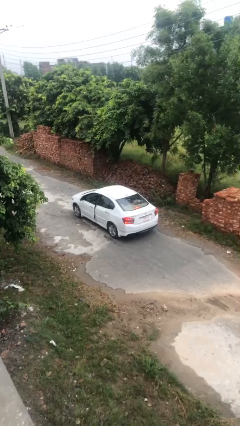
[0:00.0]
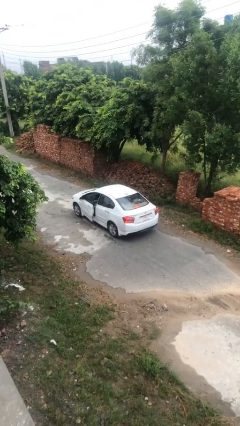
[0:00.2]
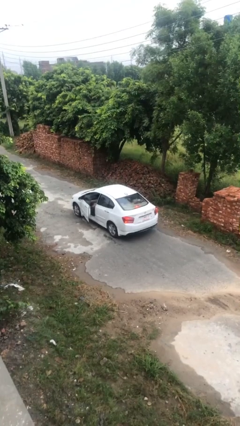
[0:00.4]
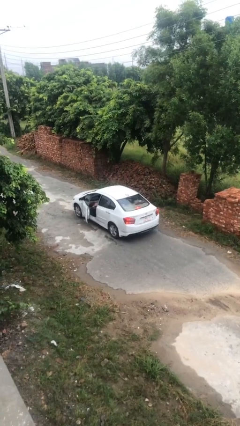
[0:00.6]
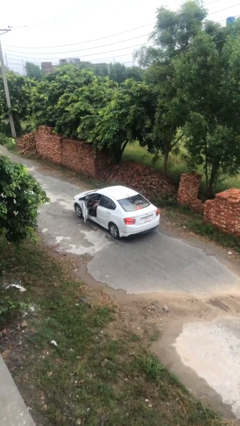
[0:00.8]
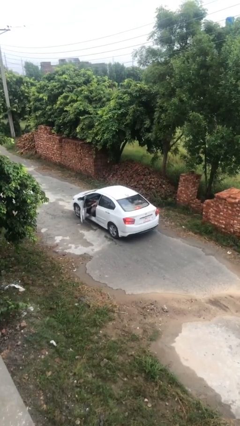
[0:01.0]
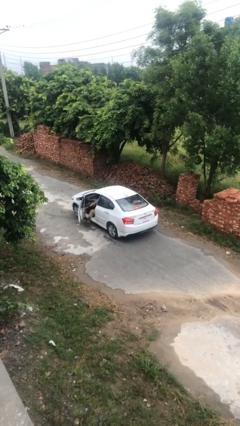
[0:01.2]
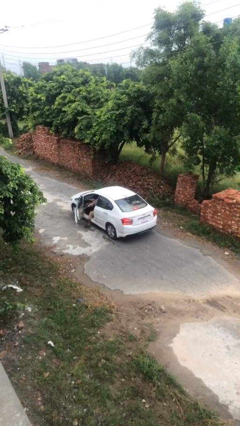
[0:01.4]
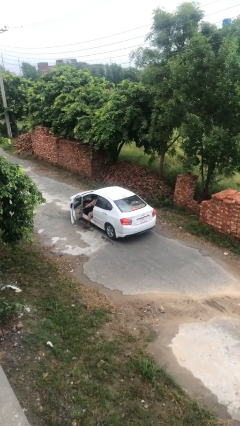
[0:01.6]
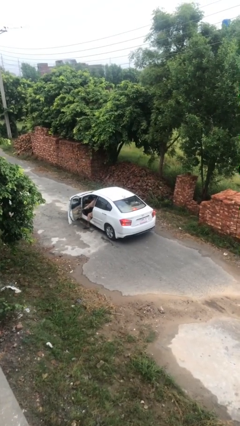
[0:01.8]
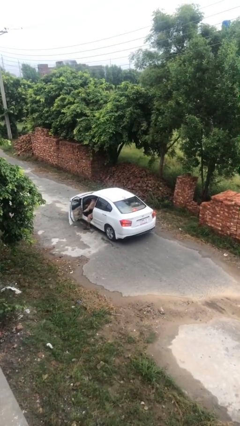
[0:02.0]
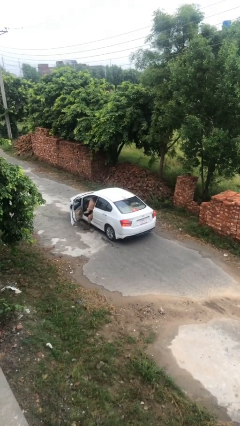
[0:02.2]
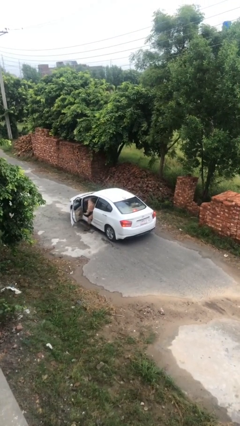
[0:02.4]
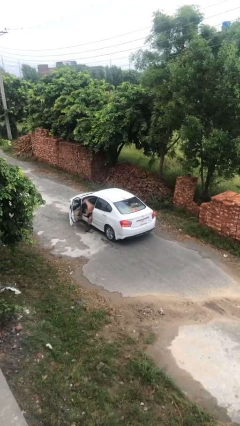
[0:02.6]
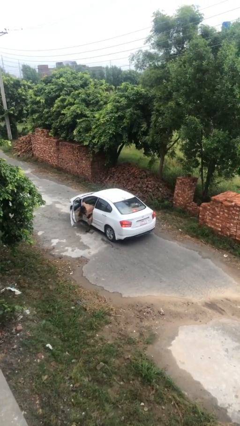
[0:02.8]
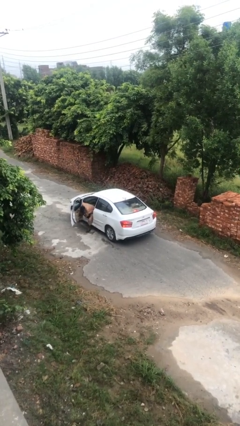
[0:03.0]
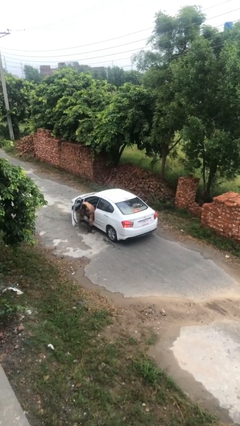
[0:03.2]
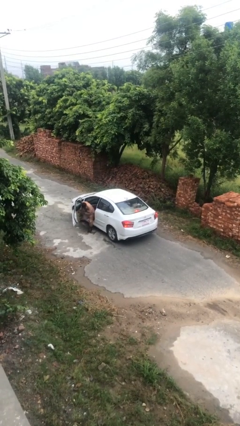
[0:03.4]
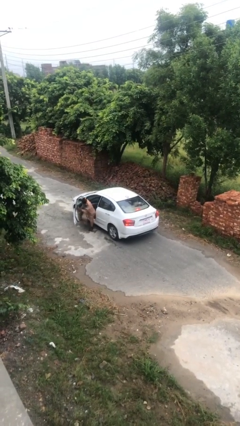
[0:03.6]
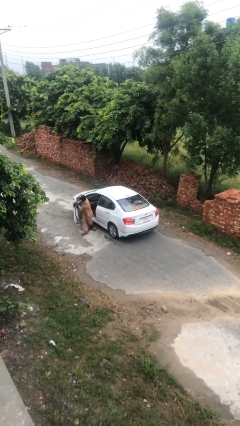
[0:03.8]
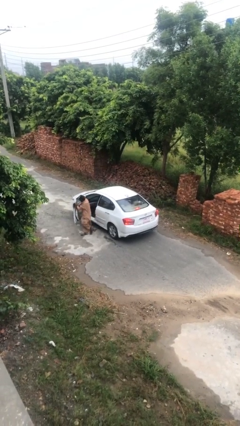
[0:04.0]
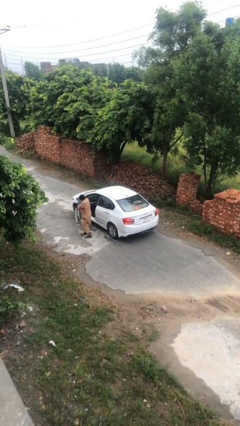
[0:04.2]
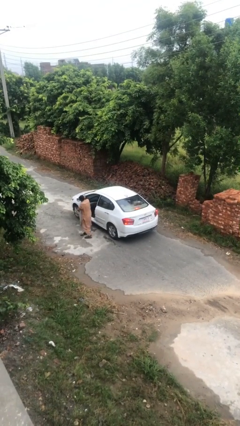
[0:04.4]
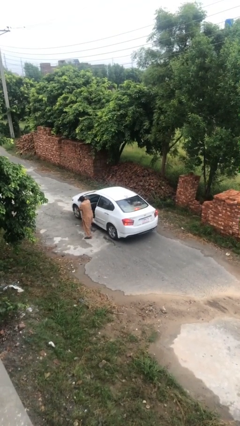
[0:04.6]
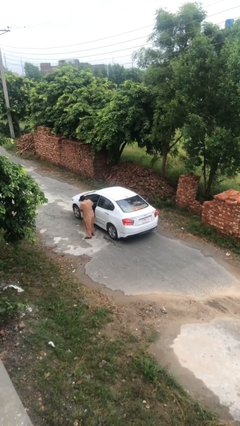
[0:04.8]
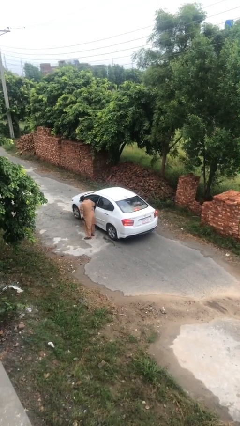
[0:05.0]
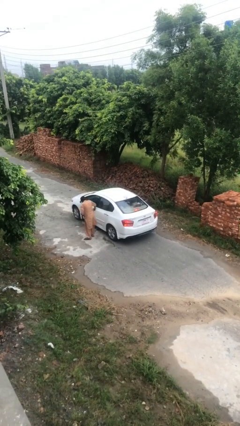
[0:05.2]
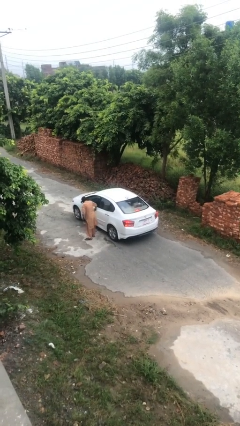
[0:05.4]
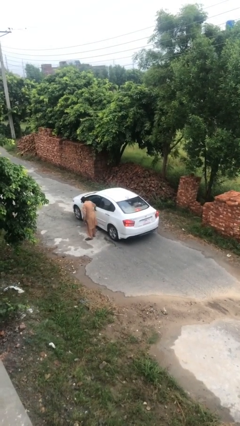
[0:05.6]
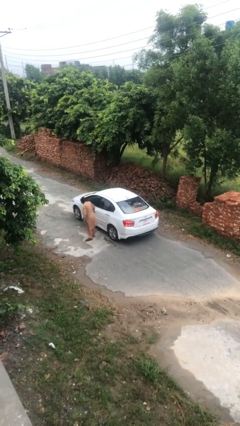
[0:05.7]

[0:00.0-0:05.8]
car drops off person

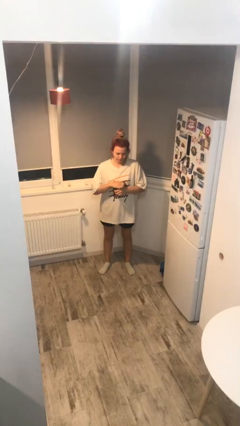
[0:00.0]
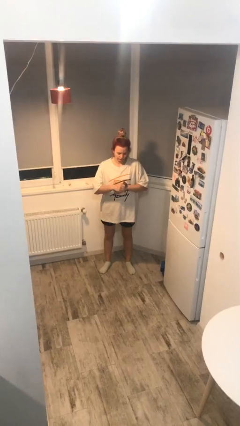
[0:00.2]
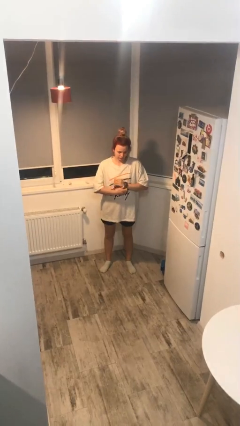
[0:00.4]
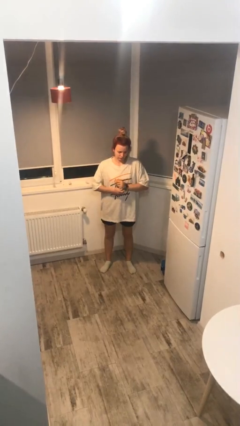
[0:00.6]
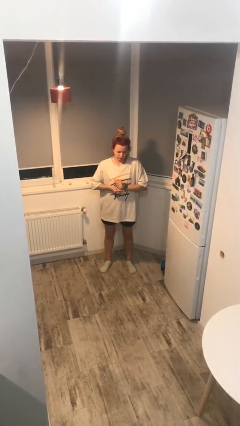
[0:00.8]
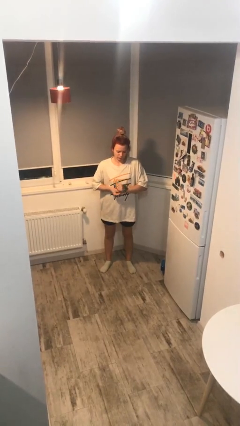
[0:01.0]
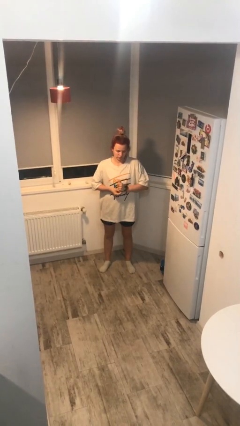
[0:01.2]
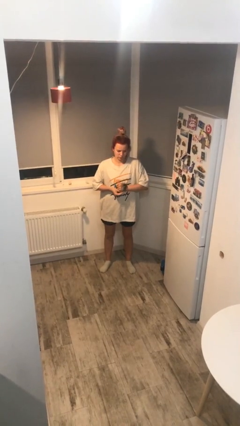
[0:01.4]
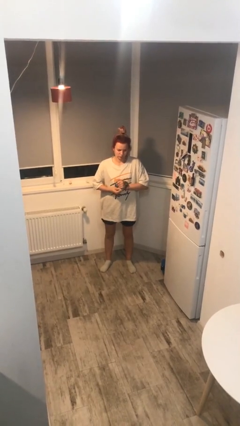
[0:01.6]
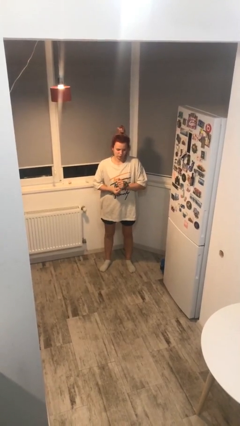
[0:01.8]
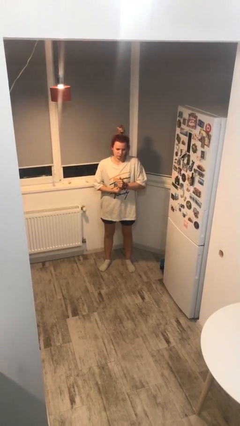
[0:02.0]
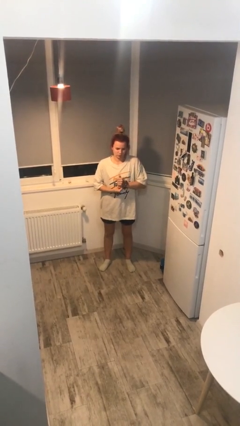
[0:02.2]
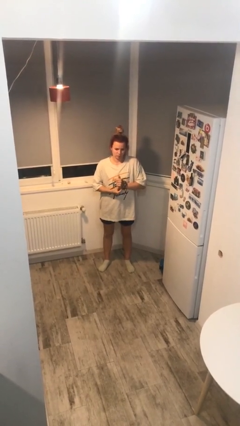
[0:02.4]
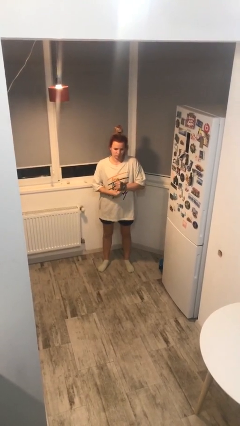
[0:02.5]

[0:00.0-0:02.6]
person puts on wristwatch

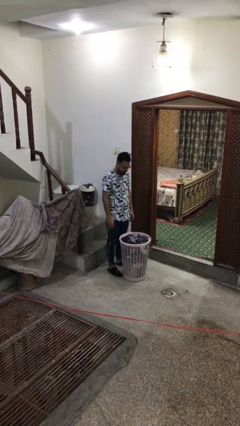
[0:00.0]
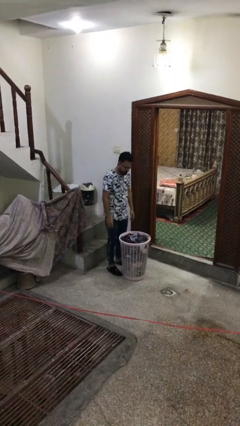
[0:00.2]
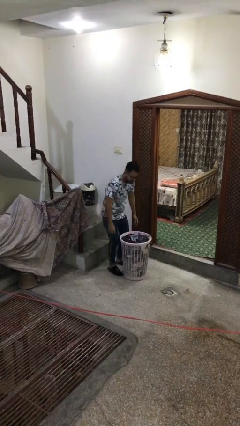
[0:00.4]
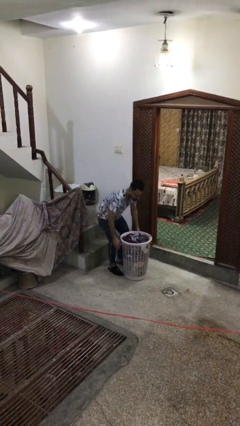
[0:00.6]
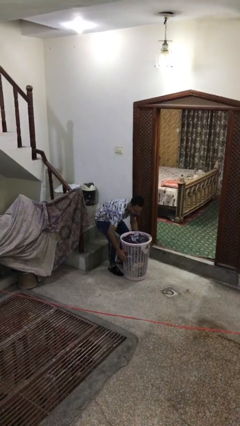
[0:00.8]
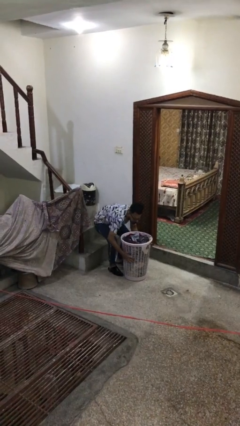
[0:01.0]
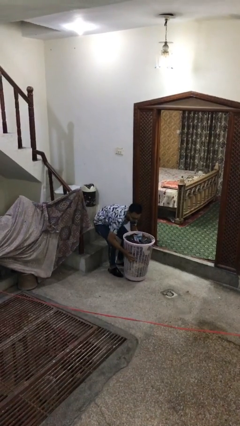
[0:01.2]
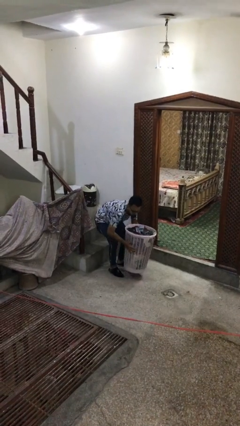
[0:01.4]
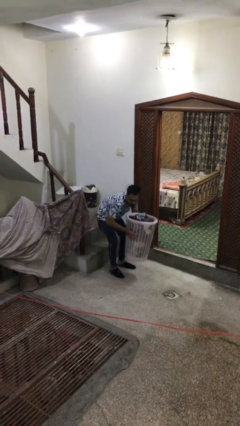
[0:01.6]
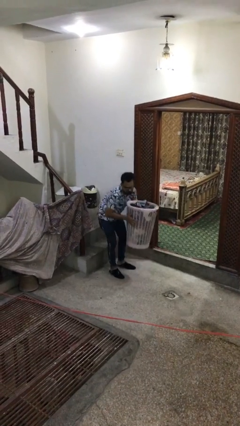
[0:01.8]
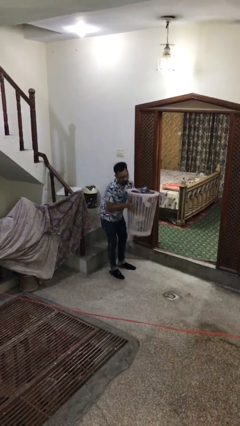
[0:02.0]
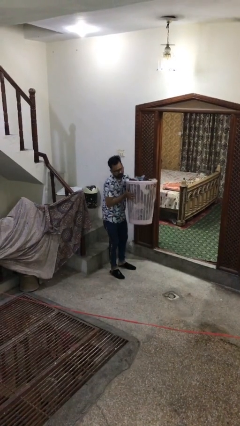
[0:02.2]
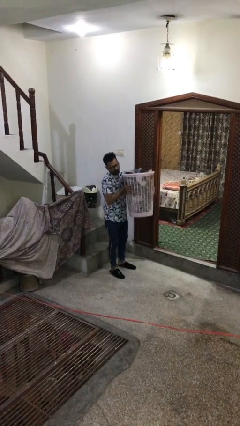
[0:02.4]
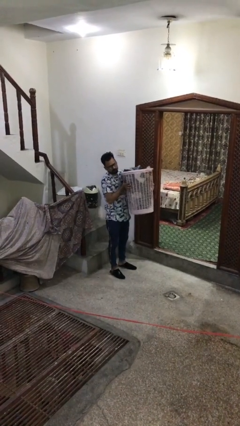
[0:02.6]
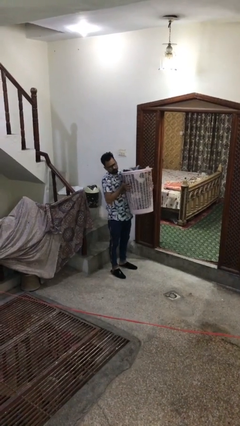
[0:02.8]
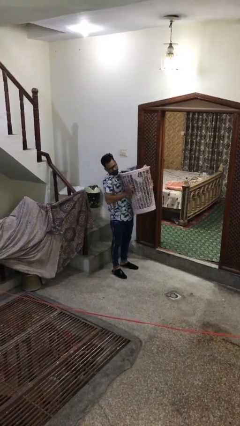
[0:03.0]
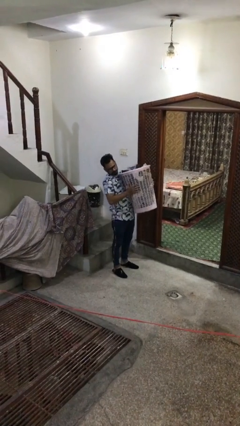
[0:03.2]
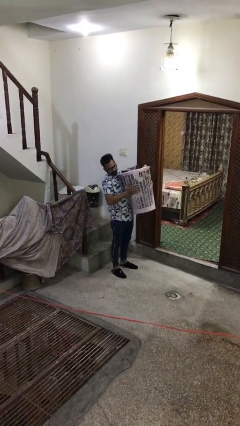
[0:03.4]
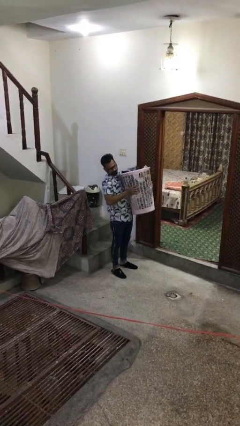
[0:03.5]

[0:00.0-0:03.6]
person picks up object from floor

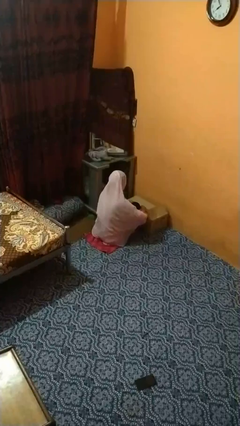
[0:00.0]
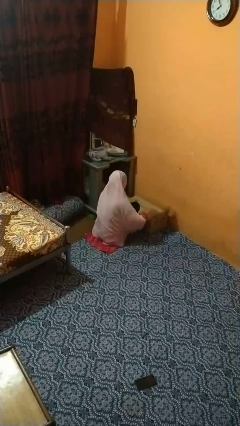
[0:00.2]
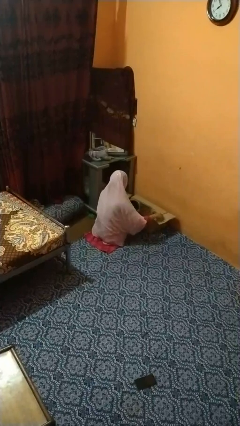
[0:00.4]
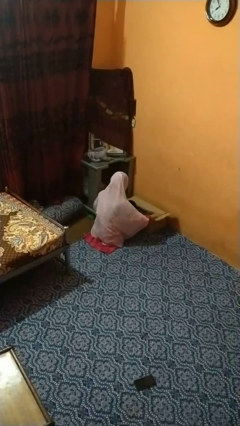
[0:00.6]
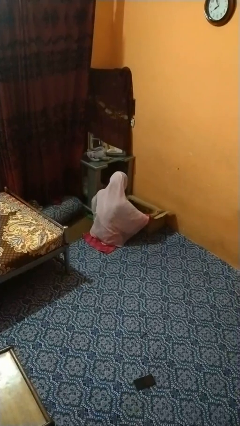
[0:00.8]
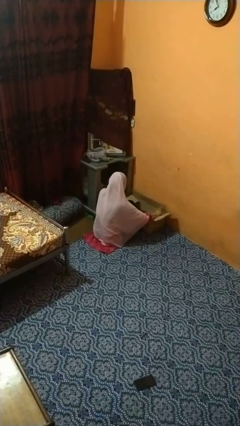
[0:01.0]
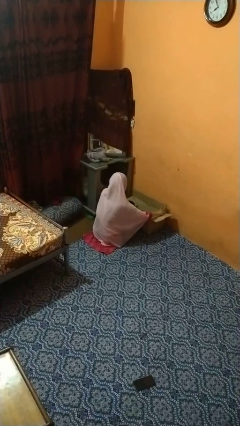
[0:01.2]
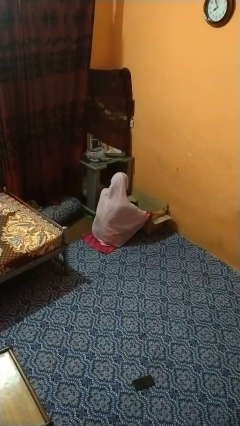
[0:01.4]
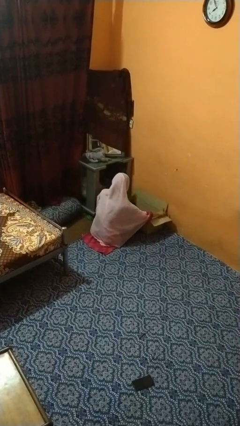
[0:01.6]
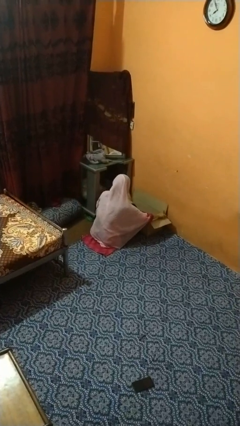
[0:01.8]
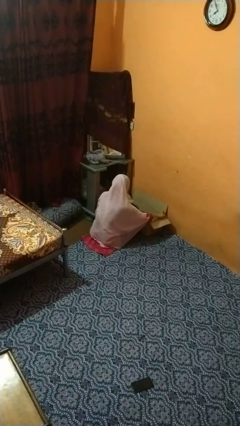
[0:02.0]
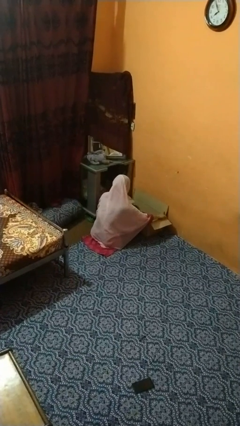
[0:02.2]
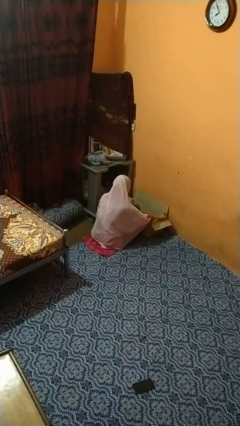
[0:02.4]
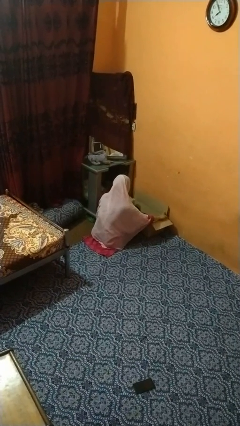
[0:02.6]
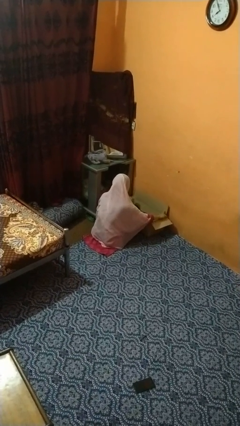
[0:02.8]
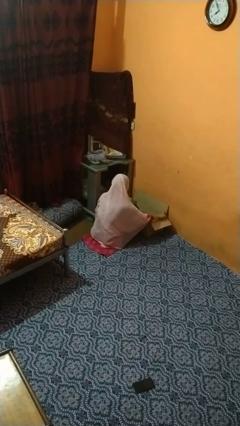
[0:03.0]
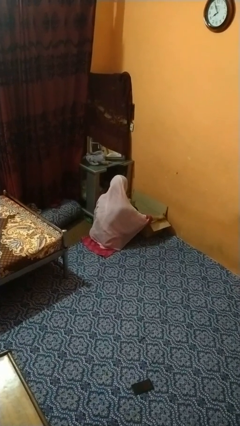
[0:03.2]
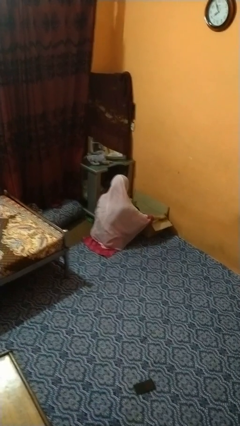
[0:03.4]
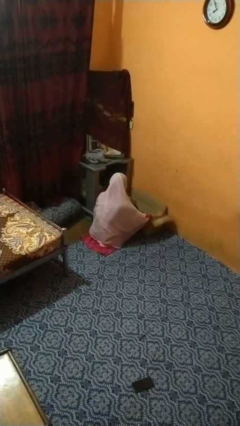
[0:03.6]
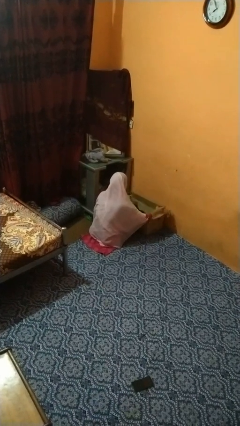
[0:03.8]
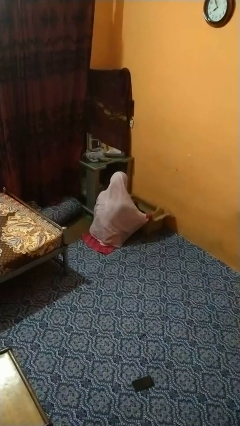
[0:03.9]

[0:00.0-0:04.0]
person opens box

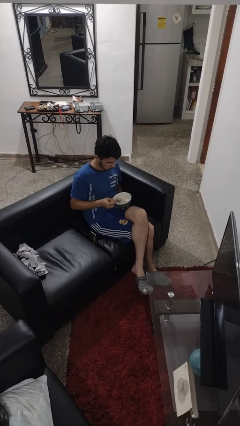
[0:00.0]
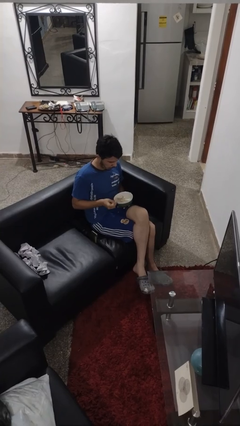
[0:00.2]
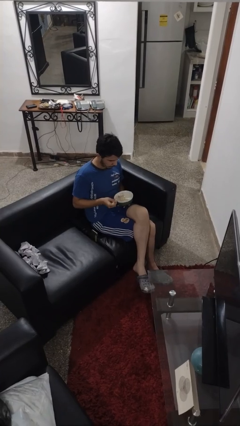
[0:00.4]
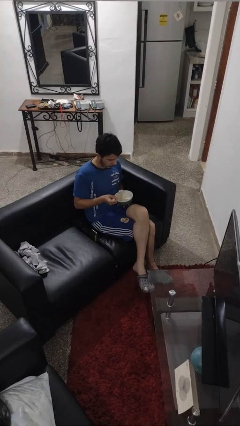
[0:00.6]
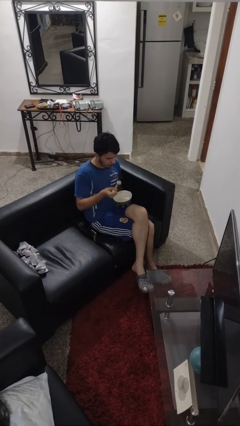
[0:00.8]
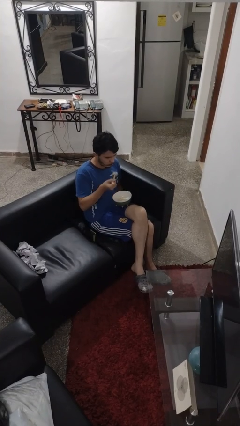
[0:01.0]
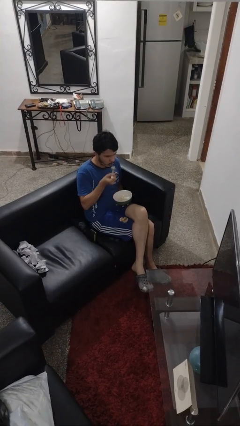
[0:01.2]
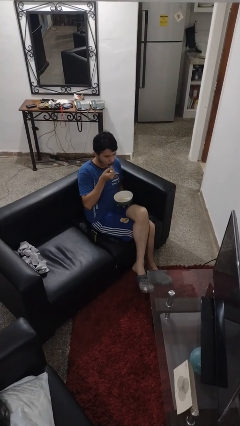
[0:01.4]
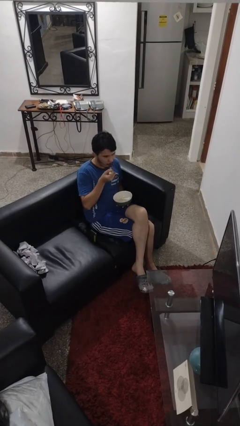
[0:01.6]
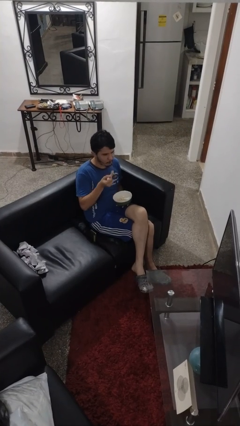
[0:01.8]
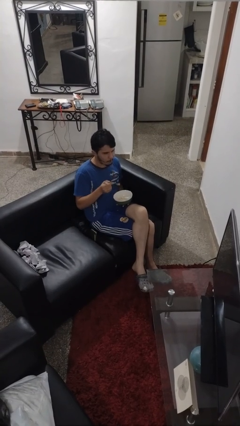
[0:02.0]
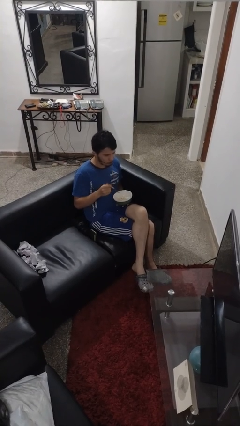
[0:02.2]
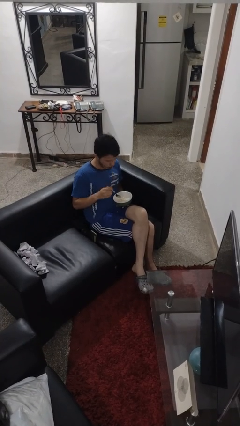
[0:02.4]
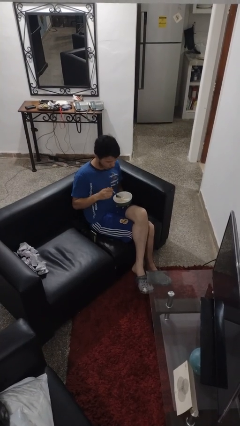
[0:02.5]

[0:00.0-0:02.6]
person eats with utensil
